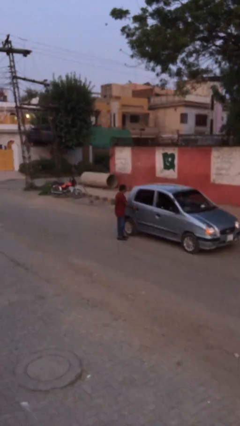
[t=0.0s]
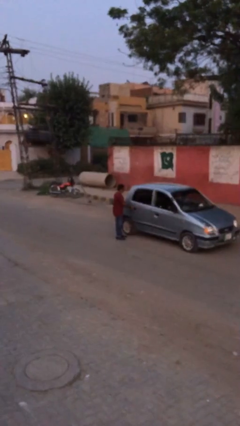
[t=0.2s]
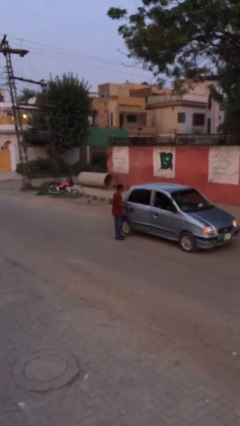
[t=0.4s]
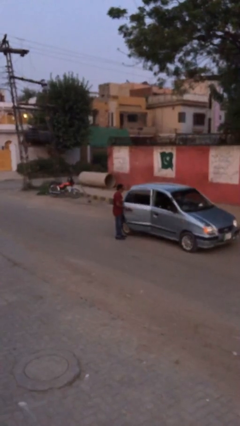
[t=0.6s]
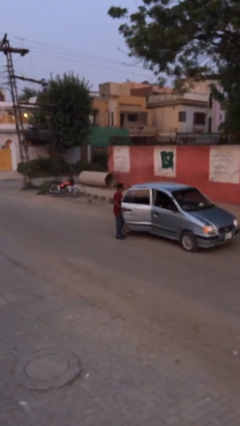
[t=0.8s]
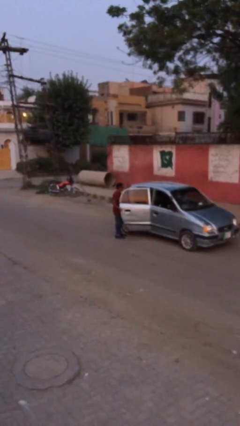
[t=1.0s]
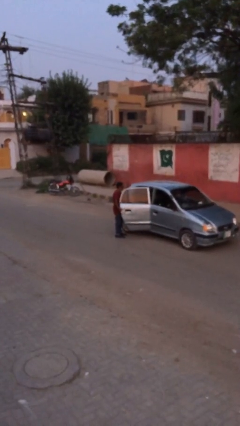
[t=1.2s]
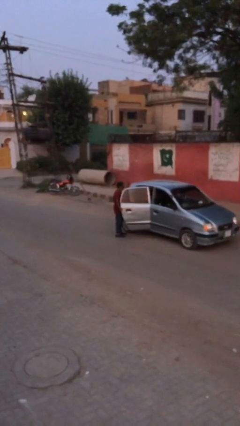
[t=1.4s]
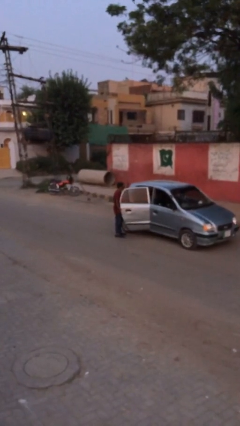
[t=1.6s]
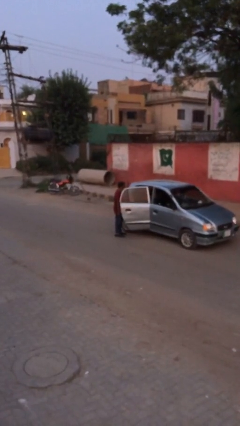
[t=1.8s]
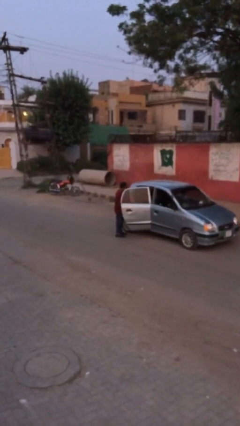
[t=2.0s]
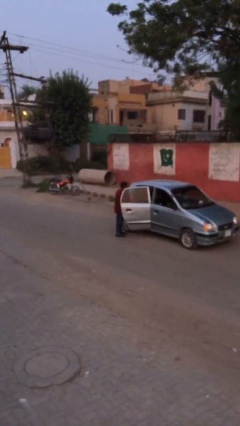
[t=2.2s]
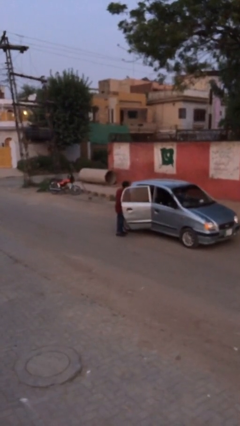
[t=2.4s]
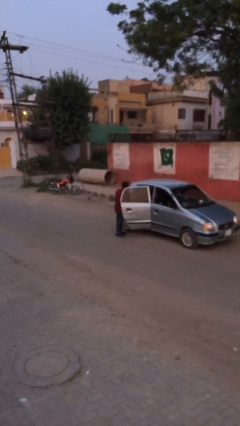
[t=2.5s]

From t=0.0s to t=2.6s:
person opens car door

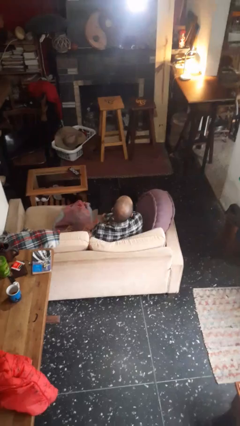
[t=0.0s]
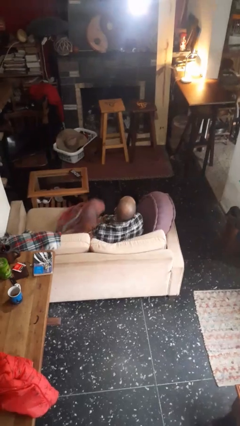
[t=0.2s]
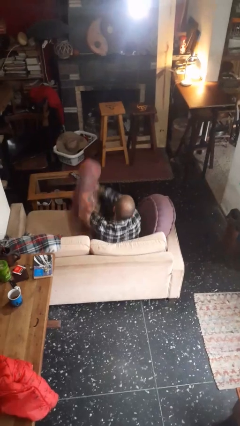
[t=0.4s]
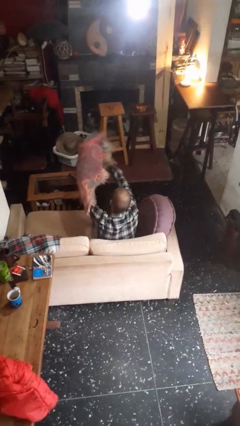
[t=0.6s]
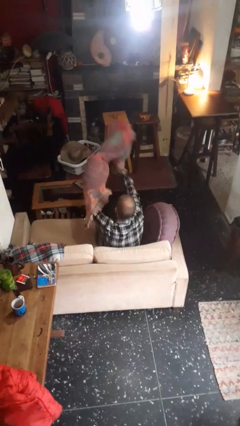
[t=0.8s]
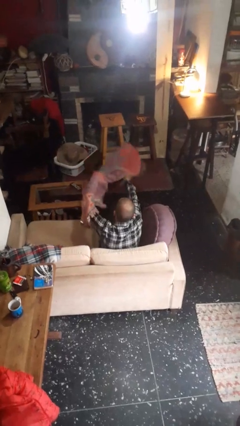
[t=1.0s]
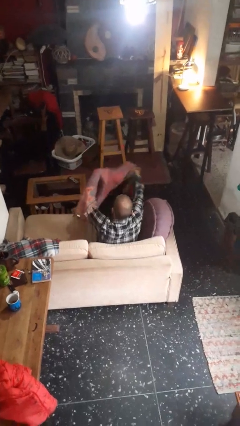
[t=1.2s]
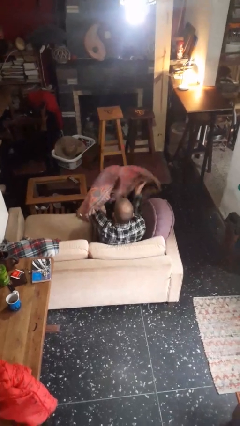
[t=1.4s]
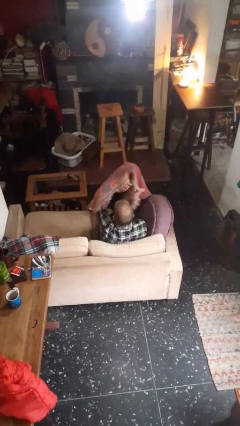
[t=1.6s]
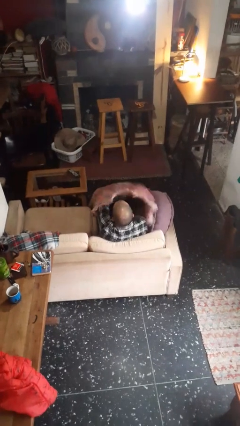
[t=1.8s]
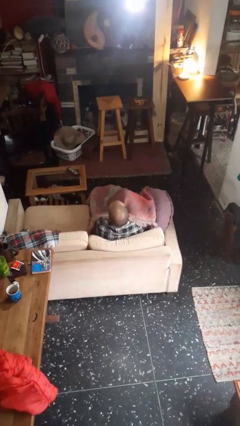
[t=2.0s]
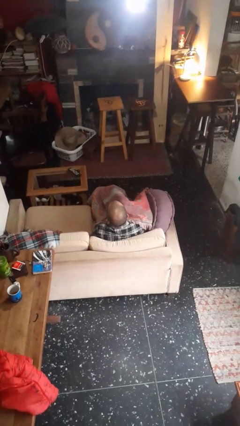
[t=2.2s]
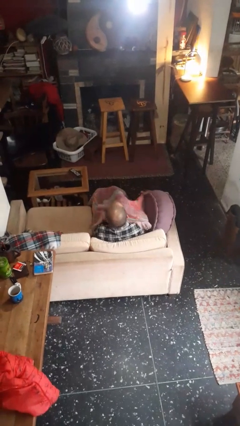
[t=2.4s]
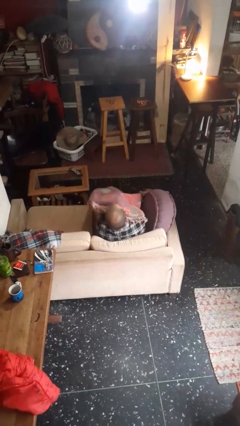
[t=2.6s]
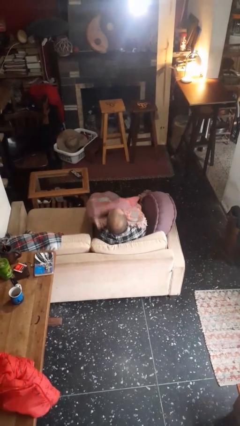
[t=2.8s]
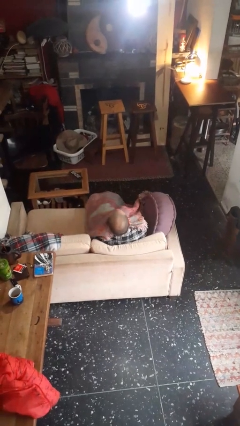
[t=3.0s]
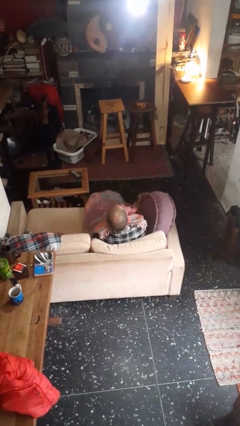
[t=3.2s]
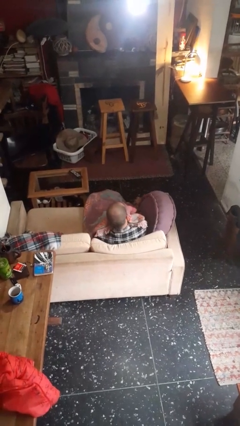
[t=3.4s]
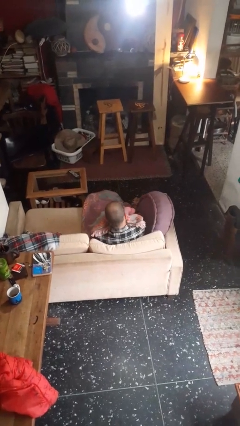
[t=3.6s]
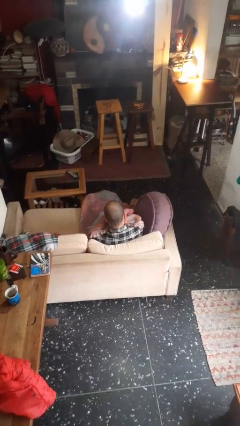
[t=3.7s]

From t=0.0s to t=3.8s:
person covers with blanket

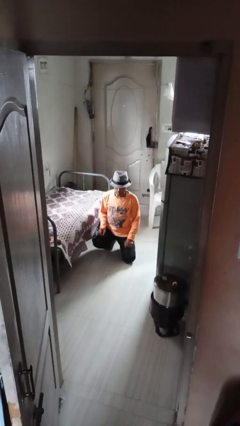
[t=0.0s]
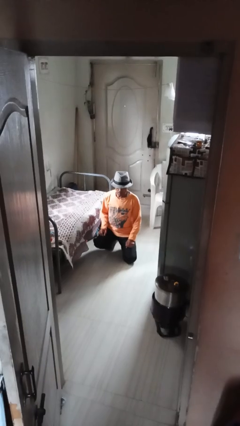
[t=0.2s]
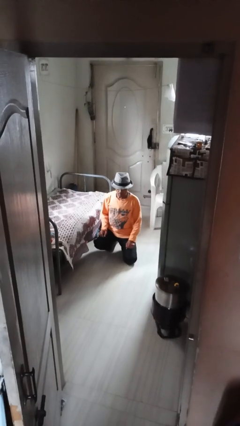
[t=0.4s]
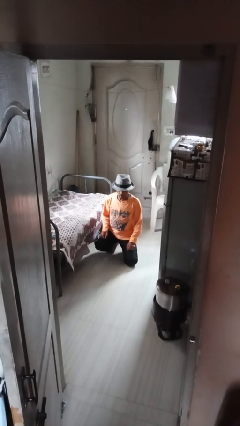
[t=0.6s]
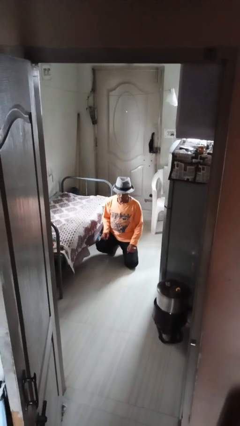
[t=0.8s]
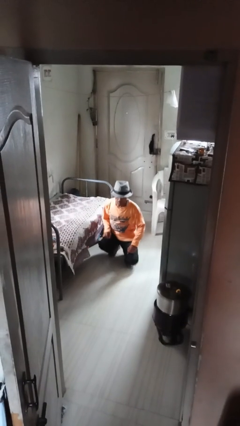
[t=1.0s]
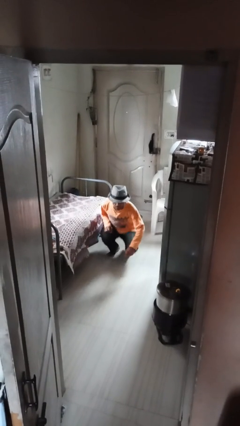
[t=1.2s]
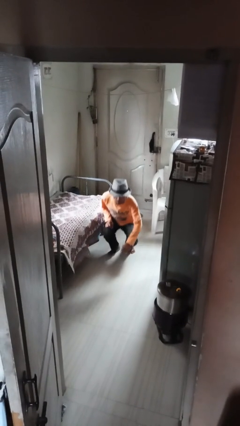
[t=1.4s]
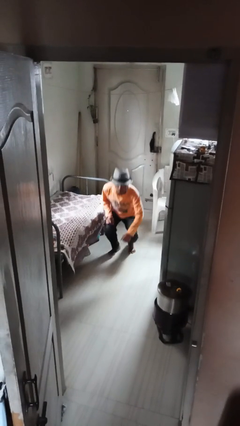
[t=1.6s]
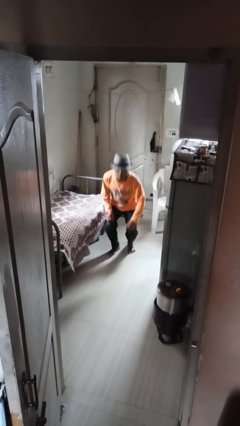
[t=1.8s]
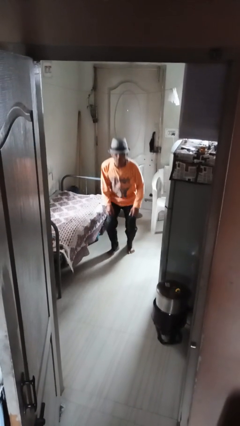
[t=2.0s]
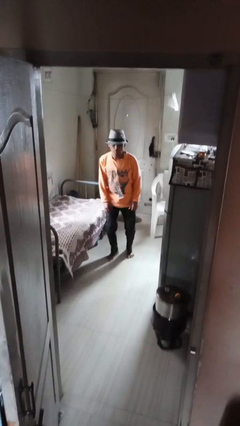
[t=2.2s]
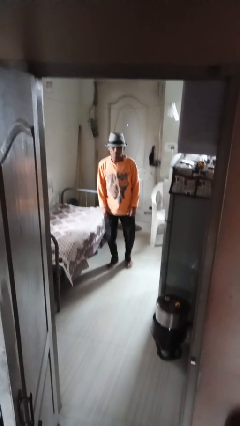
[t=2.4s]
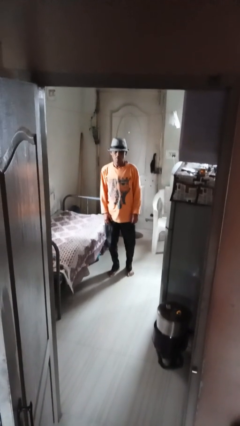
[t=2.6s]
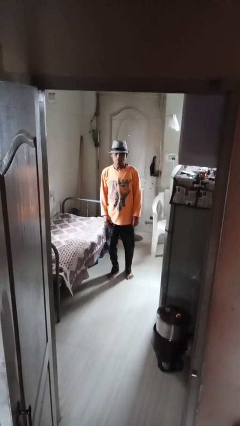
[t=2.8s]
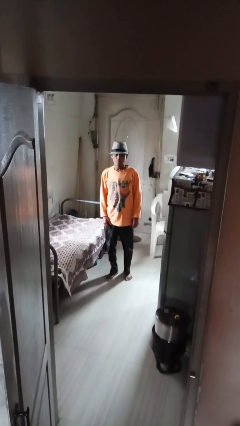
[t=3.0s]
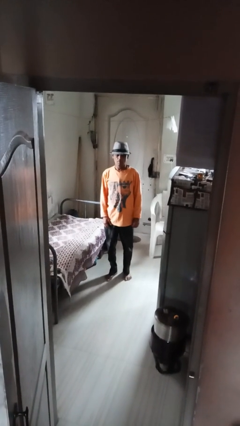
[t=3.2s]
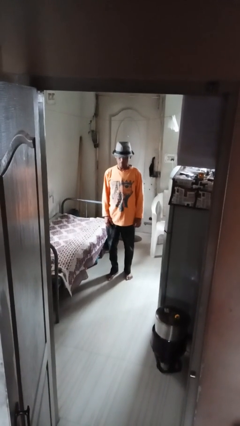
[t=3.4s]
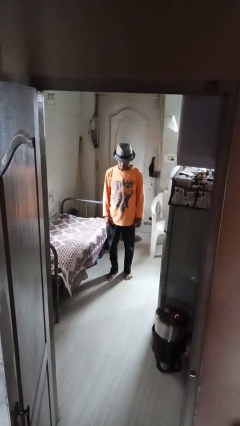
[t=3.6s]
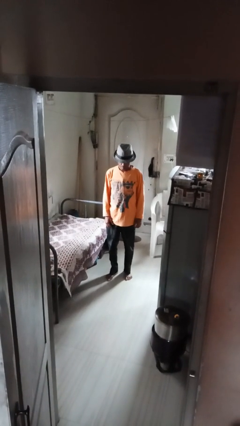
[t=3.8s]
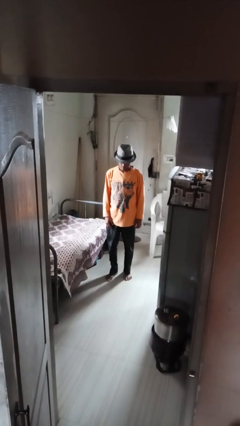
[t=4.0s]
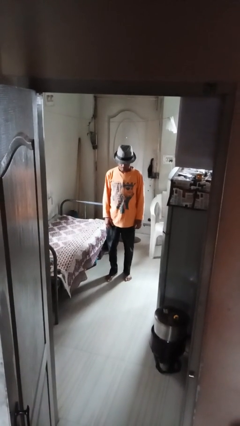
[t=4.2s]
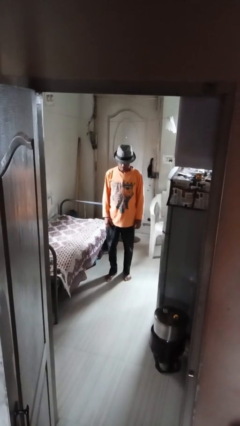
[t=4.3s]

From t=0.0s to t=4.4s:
person stands up from floor

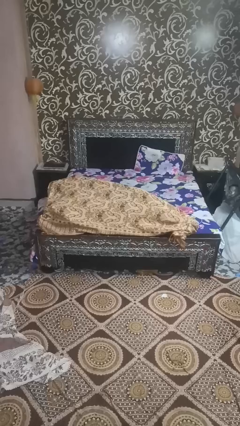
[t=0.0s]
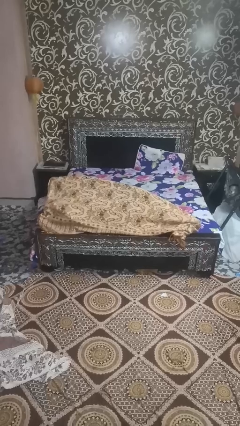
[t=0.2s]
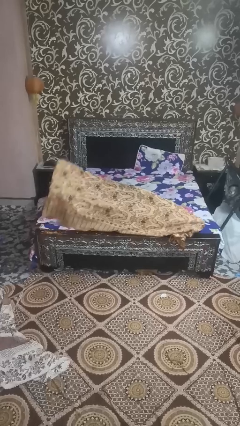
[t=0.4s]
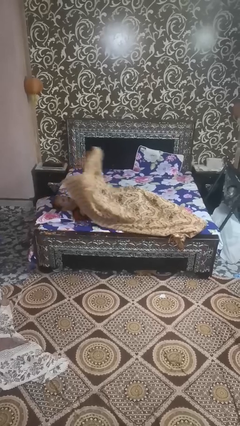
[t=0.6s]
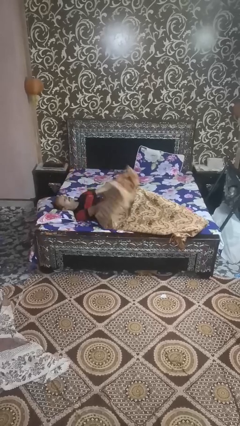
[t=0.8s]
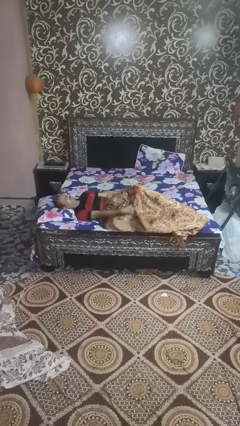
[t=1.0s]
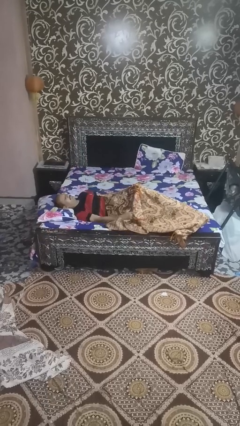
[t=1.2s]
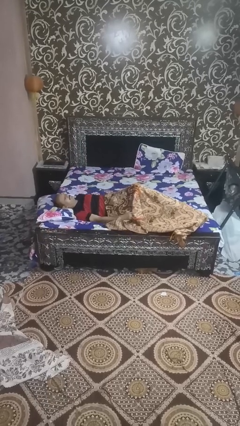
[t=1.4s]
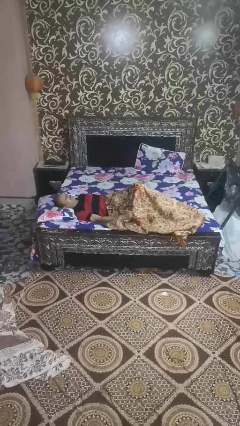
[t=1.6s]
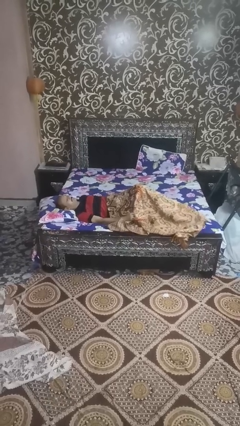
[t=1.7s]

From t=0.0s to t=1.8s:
person uncovers with blanket

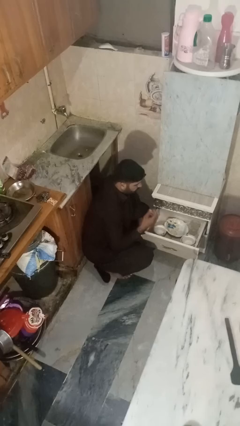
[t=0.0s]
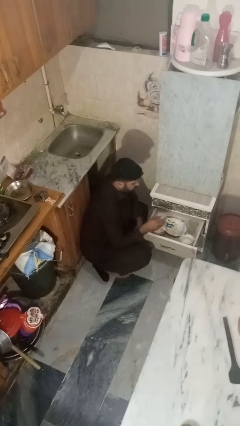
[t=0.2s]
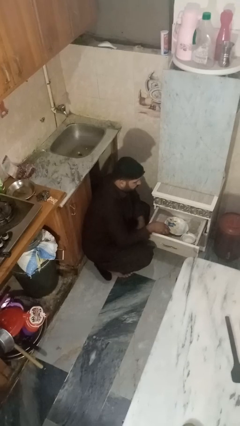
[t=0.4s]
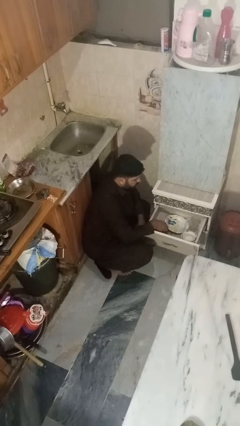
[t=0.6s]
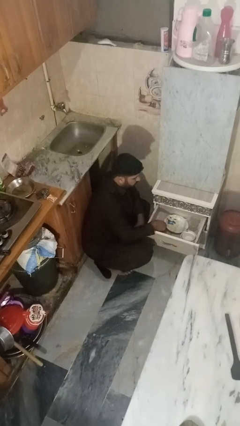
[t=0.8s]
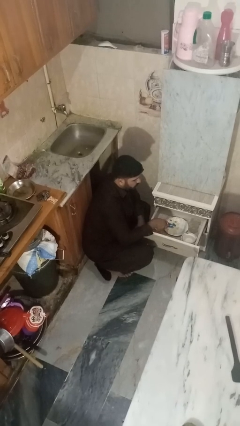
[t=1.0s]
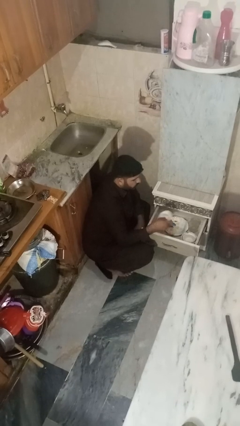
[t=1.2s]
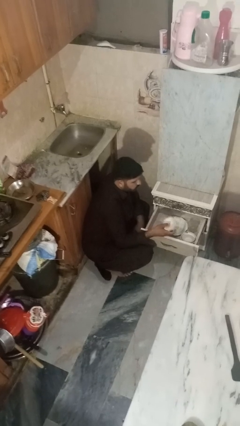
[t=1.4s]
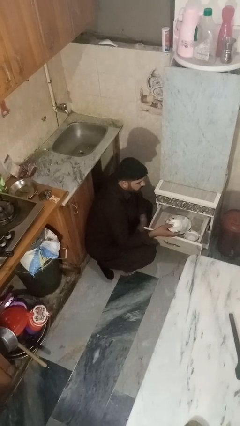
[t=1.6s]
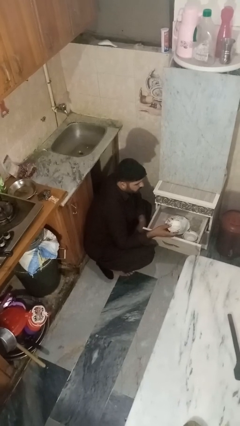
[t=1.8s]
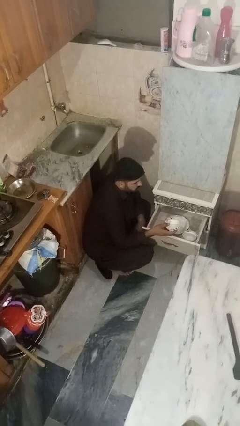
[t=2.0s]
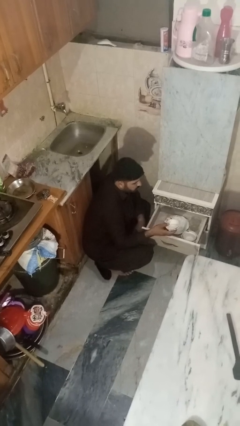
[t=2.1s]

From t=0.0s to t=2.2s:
person takes object from kitchen drawer

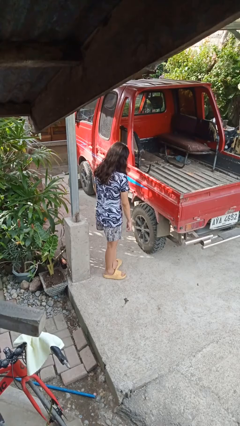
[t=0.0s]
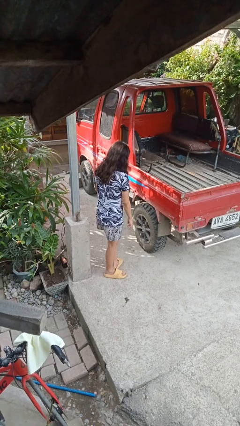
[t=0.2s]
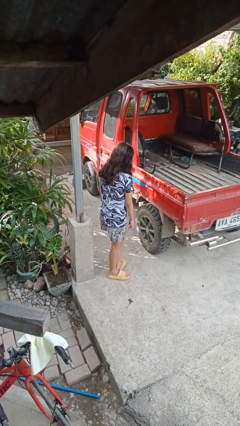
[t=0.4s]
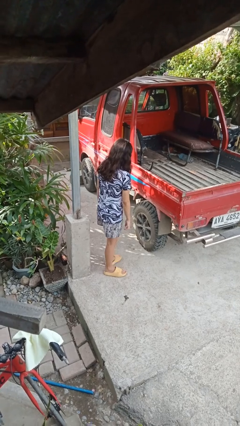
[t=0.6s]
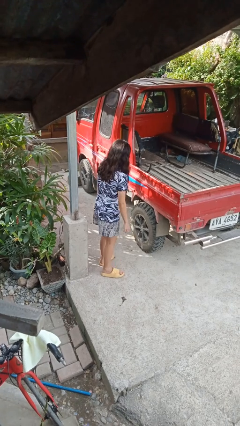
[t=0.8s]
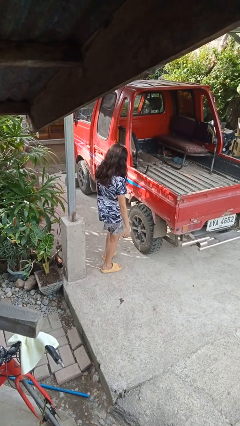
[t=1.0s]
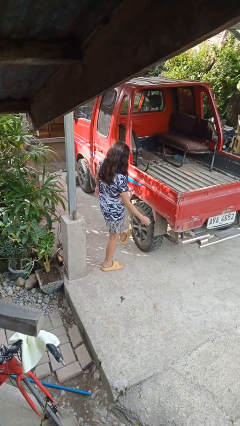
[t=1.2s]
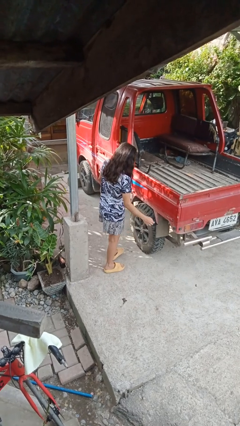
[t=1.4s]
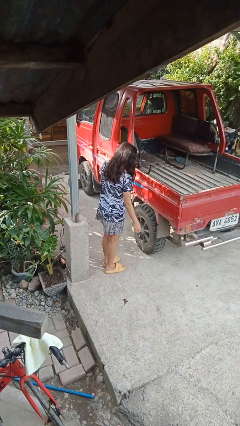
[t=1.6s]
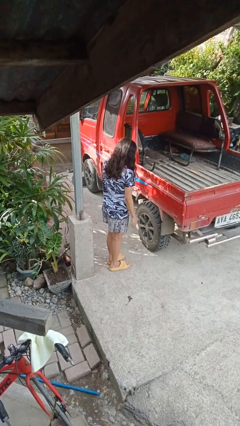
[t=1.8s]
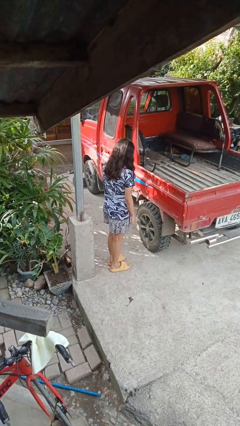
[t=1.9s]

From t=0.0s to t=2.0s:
person kicks car tires

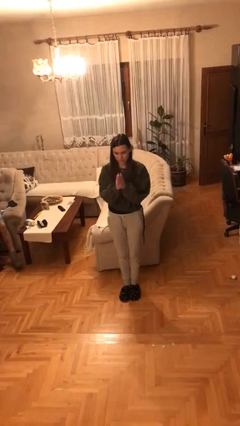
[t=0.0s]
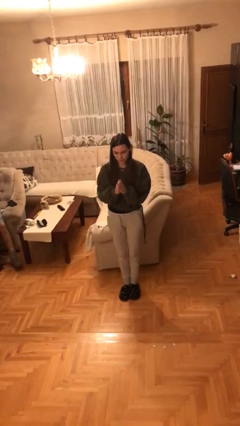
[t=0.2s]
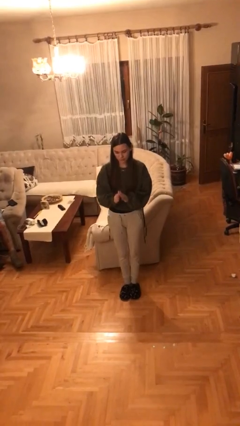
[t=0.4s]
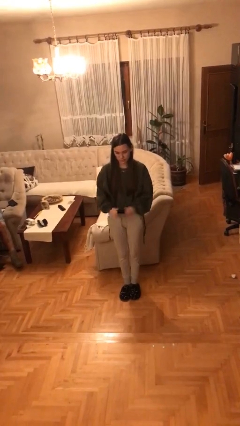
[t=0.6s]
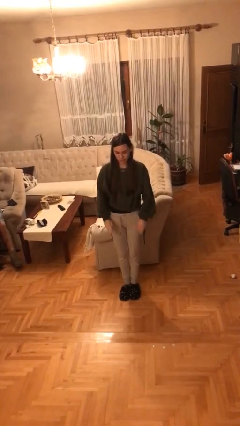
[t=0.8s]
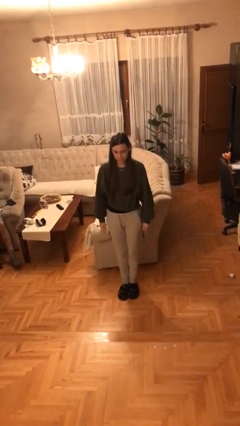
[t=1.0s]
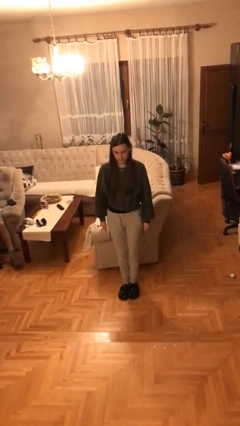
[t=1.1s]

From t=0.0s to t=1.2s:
person claps hands
